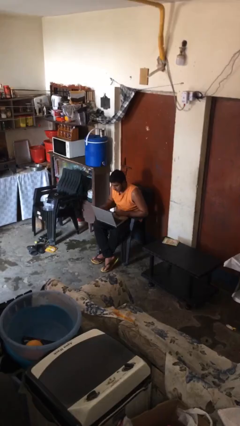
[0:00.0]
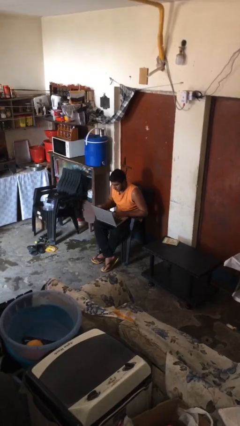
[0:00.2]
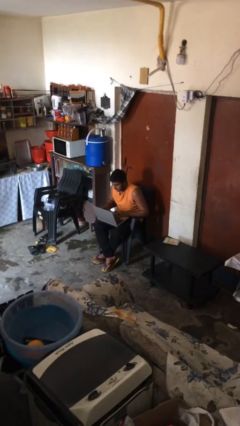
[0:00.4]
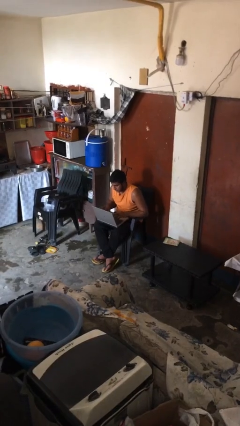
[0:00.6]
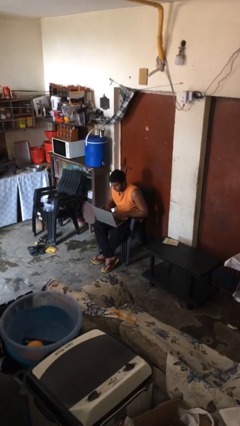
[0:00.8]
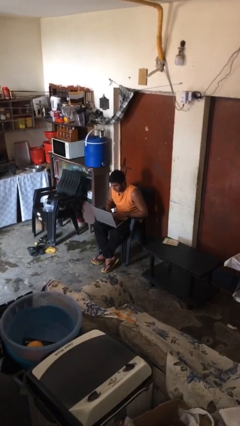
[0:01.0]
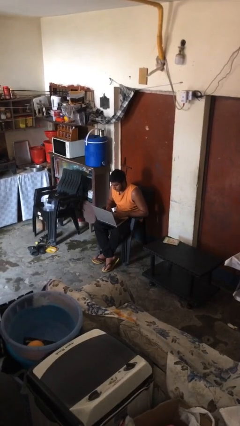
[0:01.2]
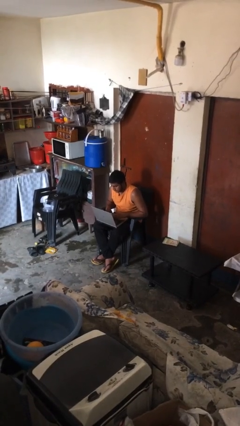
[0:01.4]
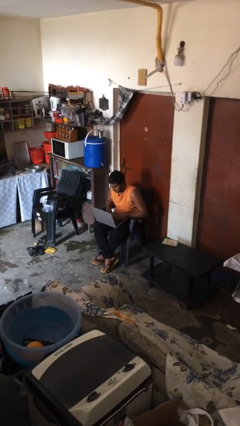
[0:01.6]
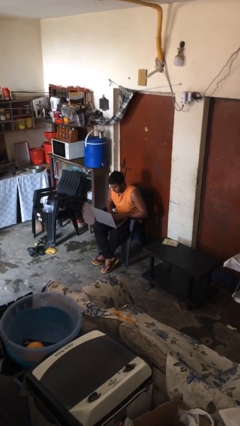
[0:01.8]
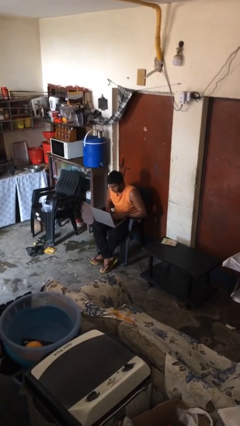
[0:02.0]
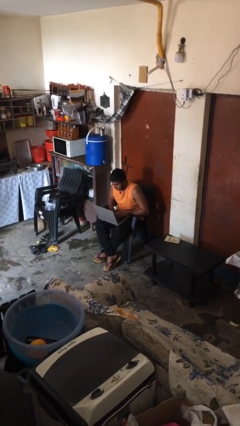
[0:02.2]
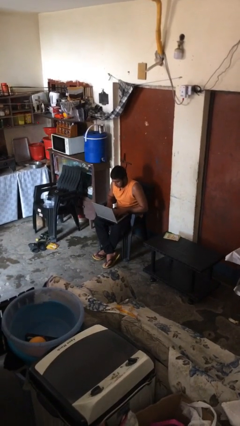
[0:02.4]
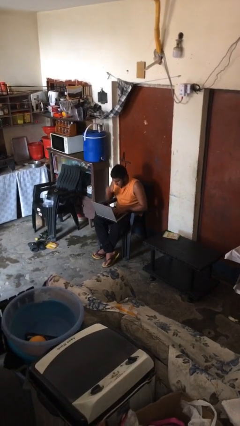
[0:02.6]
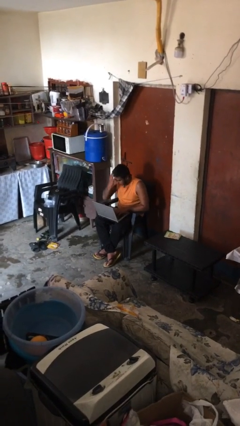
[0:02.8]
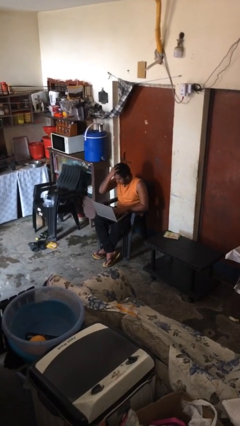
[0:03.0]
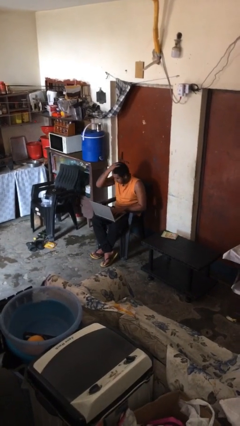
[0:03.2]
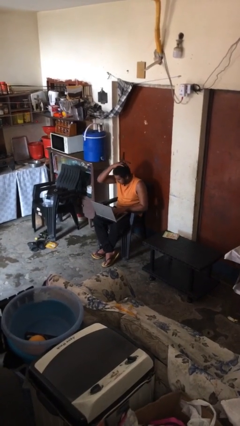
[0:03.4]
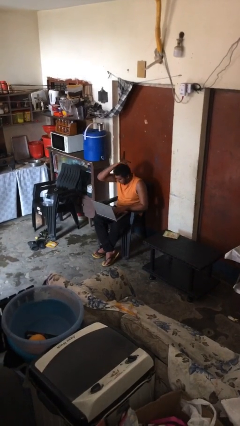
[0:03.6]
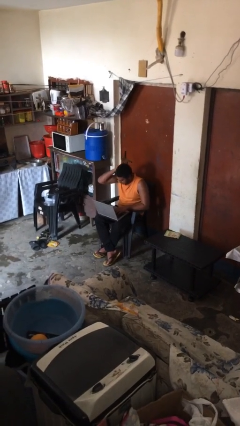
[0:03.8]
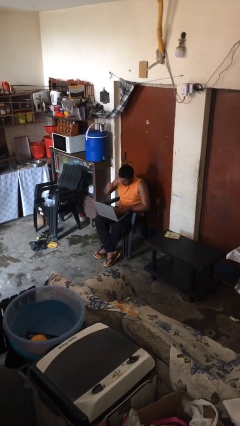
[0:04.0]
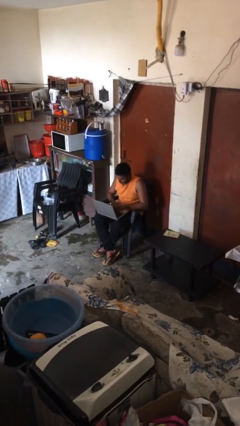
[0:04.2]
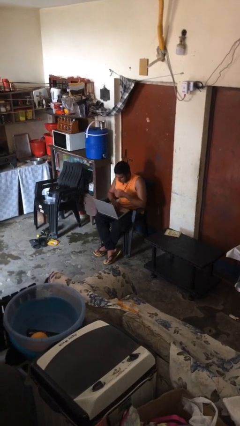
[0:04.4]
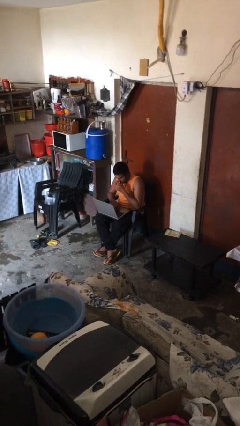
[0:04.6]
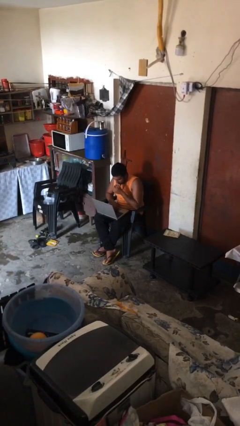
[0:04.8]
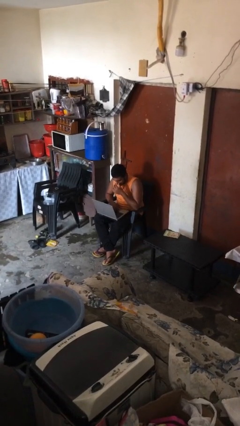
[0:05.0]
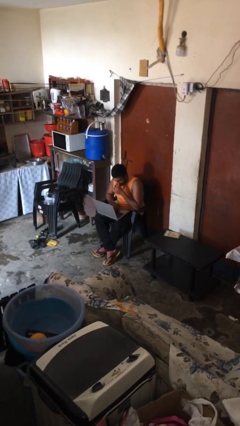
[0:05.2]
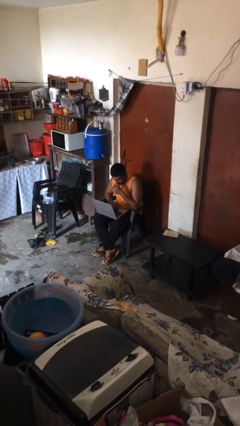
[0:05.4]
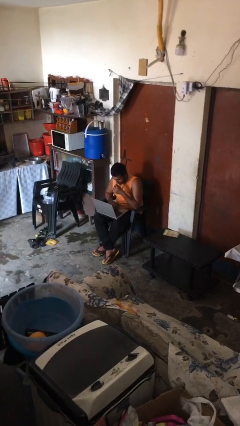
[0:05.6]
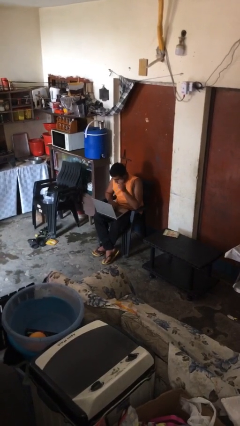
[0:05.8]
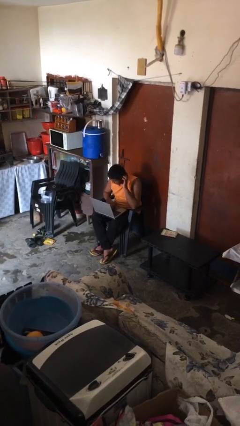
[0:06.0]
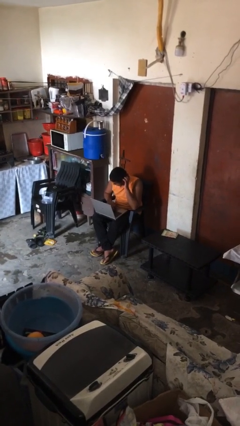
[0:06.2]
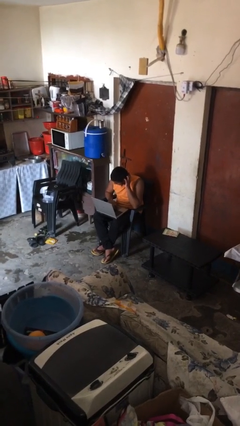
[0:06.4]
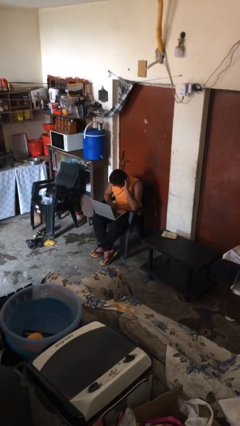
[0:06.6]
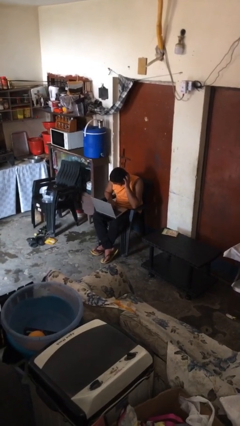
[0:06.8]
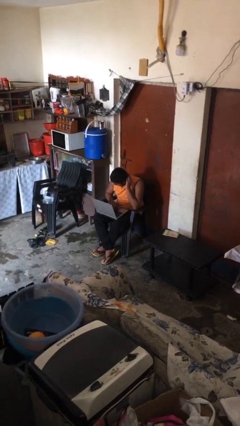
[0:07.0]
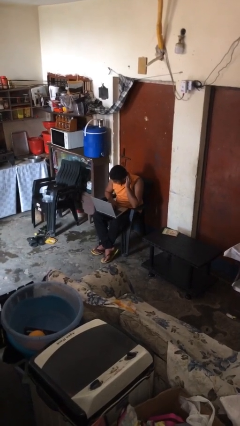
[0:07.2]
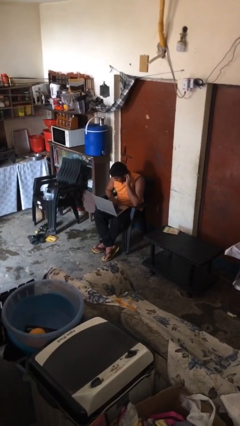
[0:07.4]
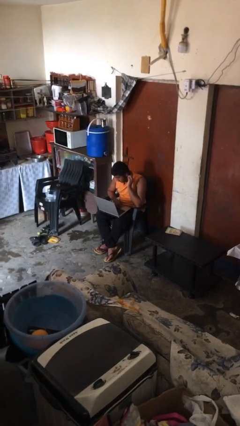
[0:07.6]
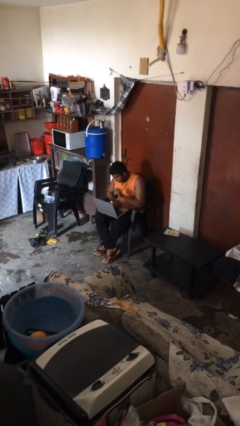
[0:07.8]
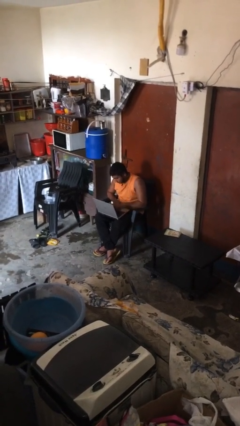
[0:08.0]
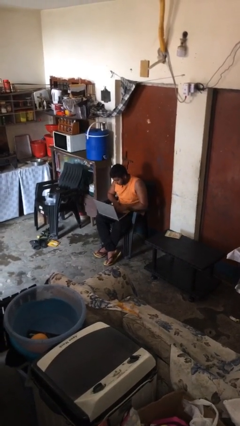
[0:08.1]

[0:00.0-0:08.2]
person interacts with laptop

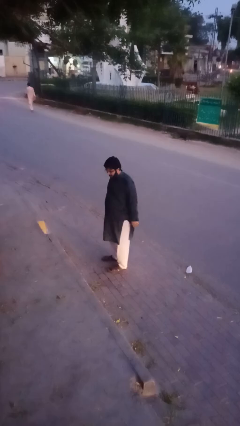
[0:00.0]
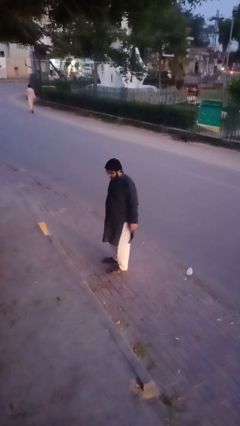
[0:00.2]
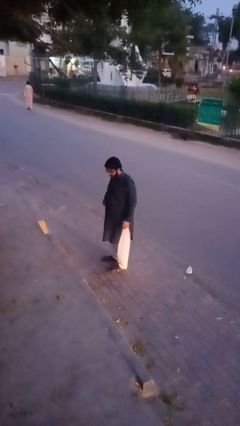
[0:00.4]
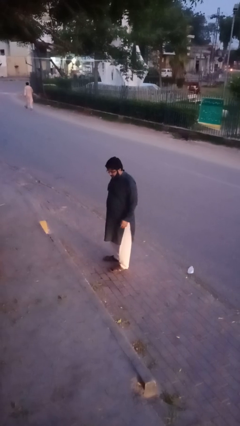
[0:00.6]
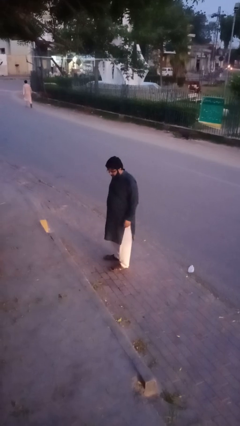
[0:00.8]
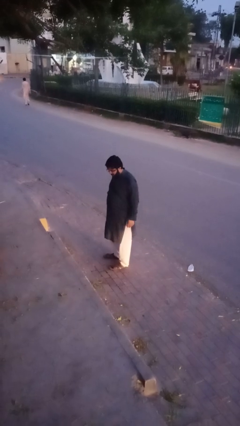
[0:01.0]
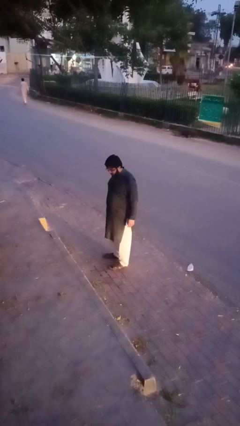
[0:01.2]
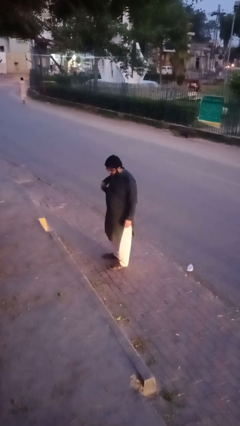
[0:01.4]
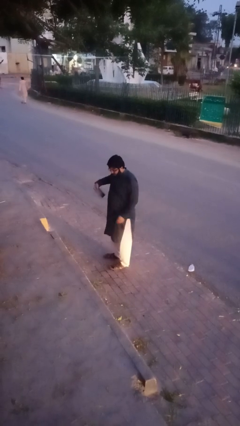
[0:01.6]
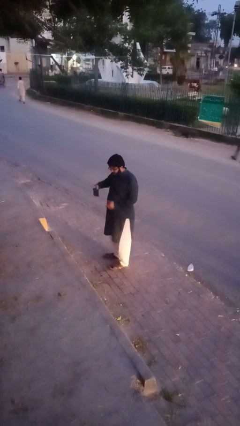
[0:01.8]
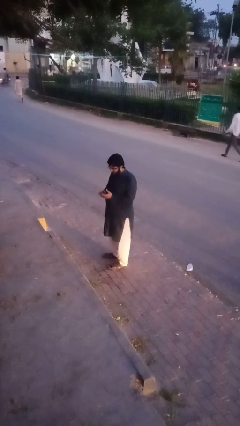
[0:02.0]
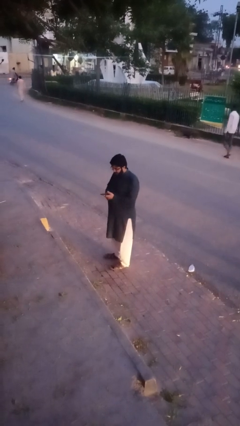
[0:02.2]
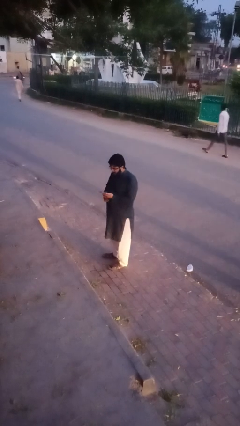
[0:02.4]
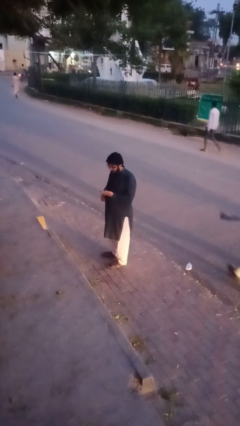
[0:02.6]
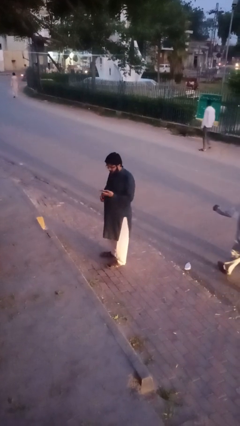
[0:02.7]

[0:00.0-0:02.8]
person takes phone from pocket

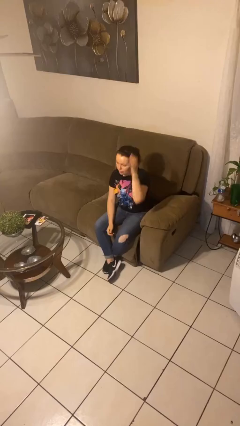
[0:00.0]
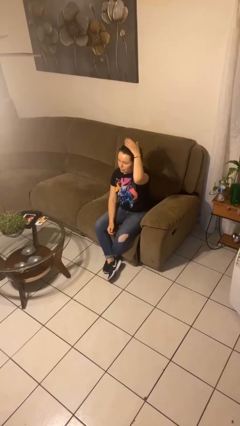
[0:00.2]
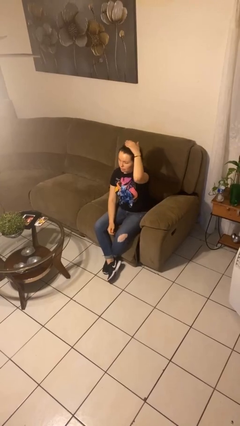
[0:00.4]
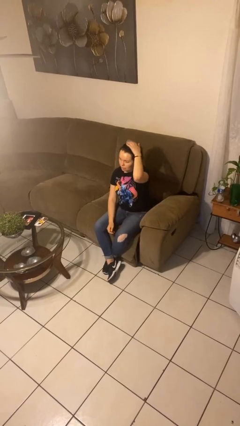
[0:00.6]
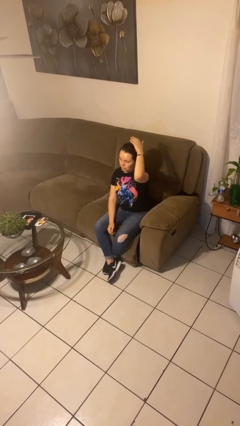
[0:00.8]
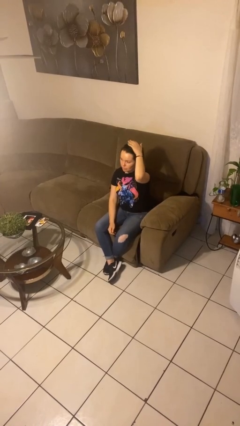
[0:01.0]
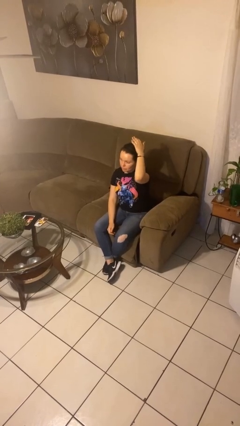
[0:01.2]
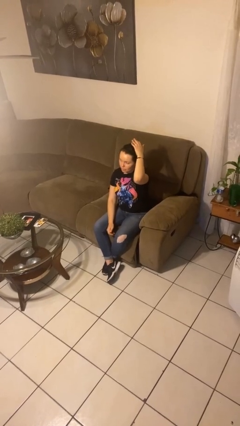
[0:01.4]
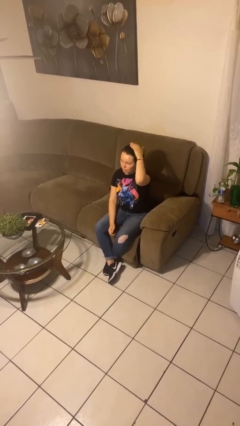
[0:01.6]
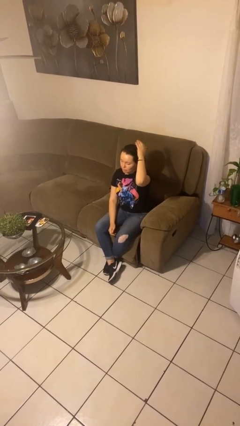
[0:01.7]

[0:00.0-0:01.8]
person pats head

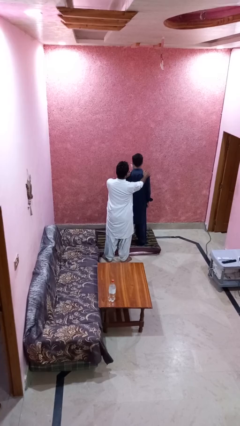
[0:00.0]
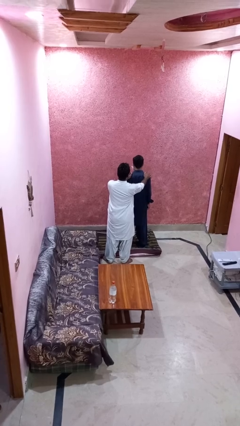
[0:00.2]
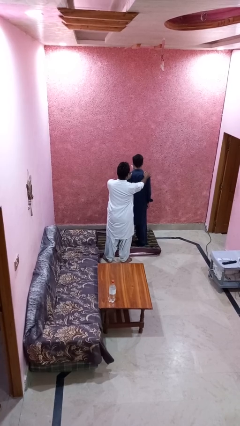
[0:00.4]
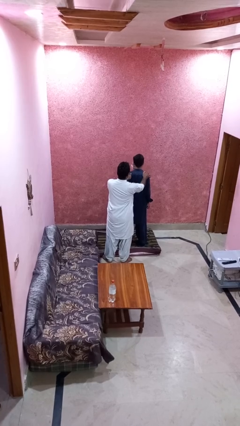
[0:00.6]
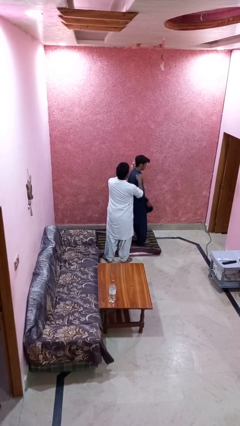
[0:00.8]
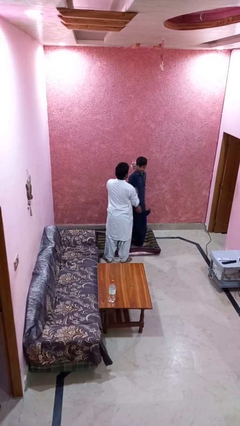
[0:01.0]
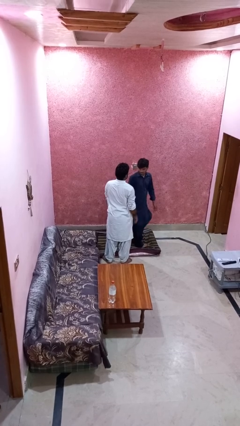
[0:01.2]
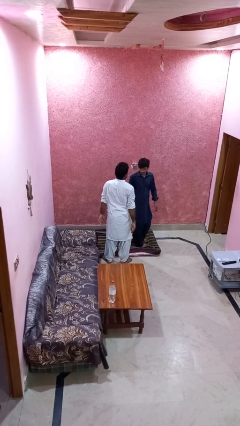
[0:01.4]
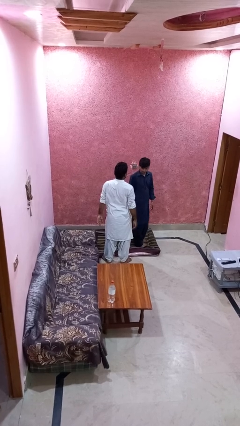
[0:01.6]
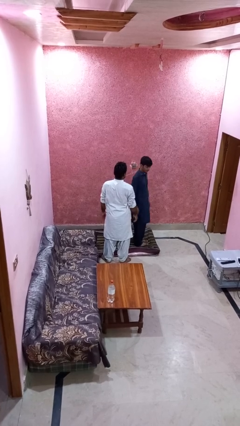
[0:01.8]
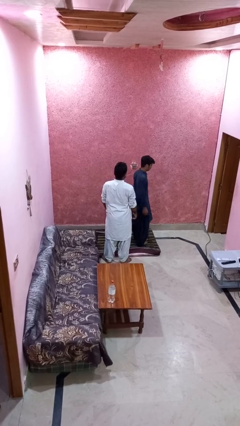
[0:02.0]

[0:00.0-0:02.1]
person spins person around

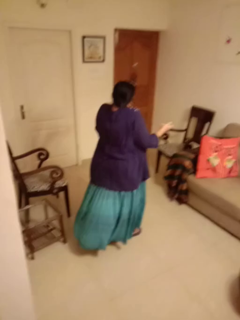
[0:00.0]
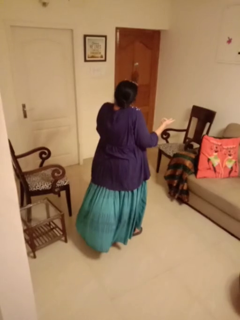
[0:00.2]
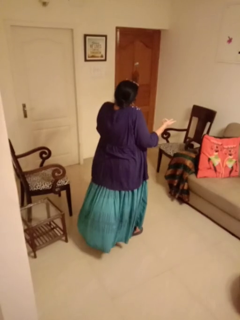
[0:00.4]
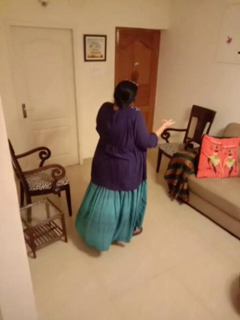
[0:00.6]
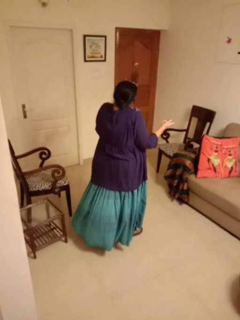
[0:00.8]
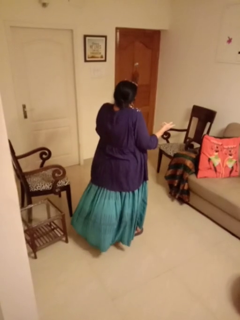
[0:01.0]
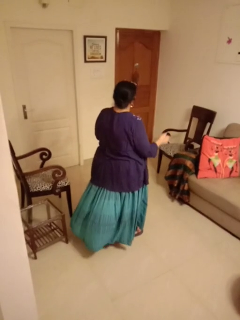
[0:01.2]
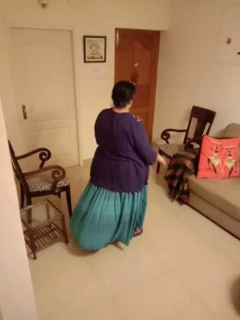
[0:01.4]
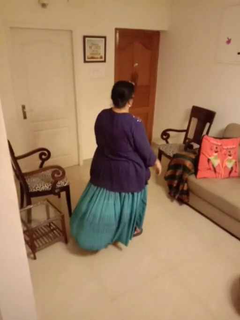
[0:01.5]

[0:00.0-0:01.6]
person shrugs

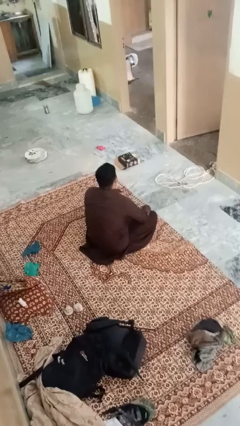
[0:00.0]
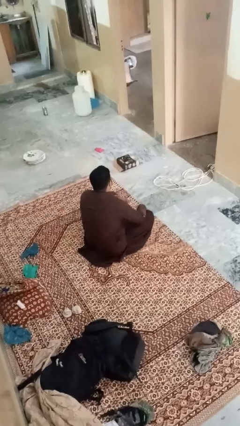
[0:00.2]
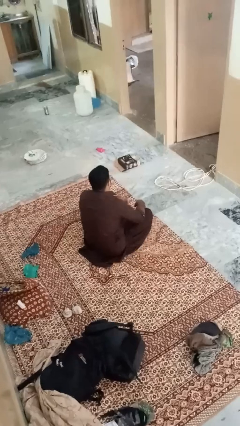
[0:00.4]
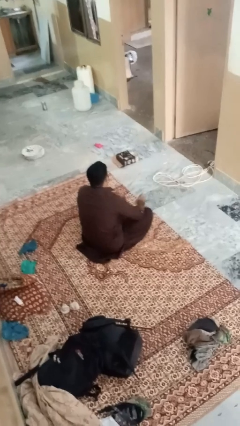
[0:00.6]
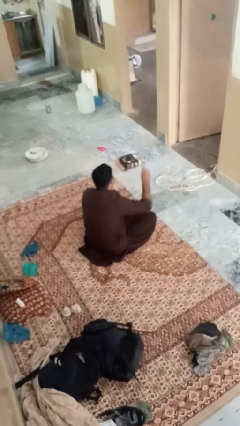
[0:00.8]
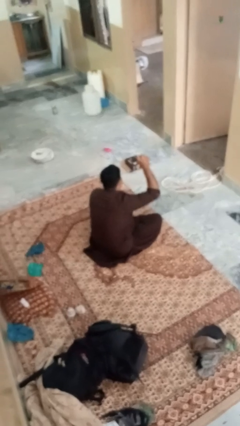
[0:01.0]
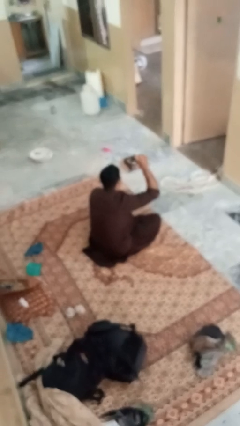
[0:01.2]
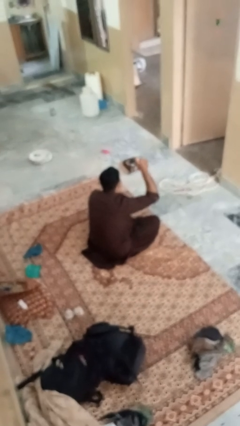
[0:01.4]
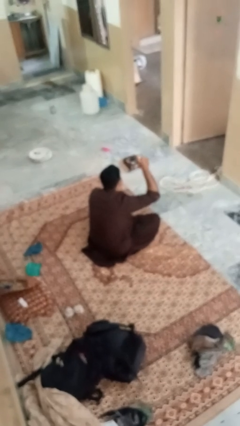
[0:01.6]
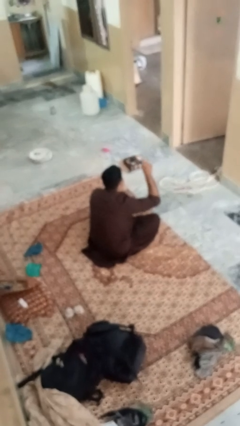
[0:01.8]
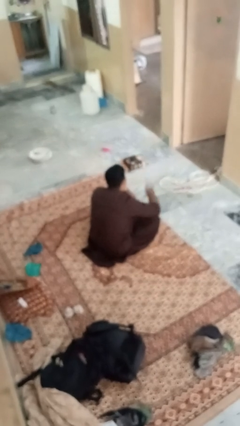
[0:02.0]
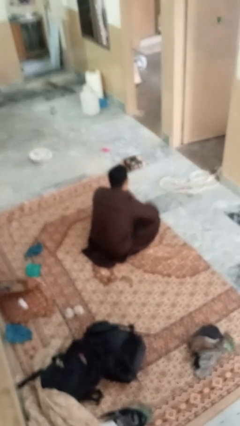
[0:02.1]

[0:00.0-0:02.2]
person gestures number one
